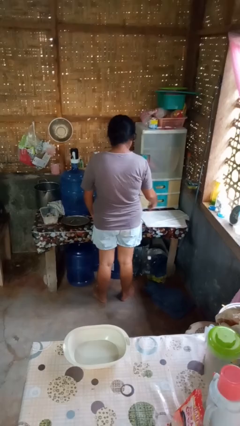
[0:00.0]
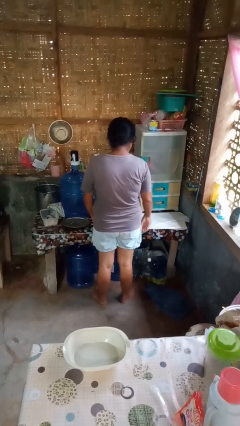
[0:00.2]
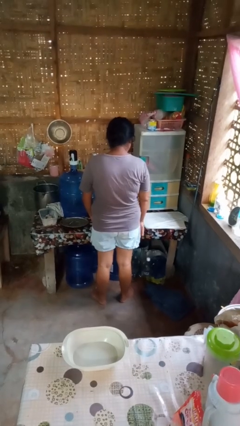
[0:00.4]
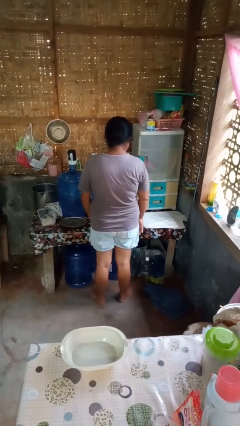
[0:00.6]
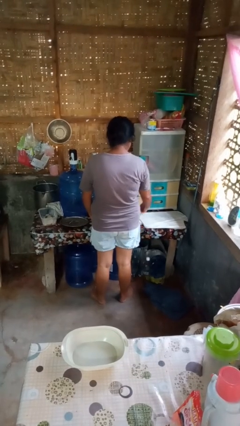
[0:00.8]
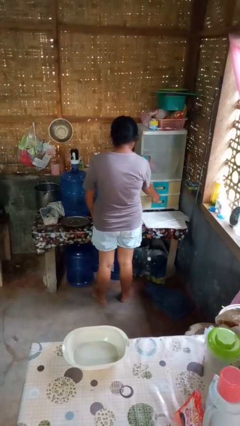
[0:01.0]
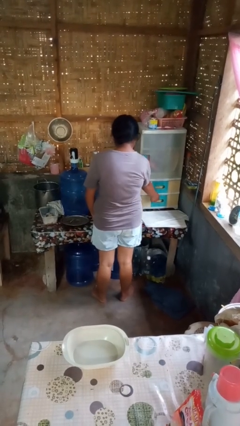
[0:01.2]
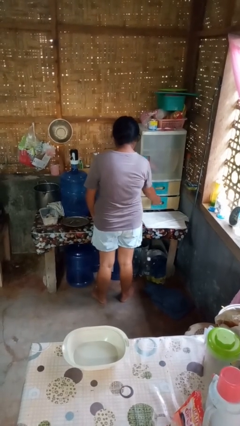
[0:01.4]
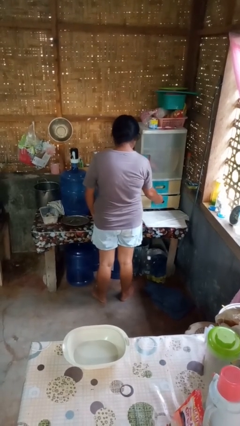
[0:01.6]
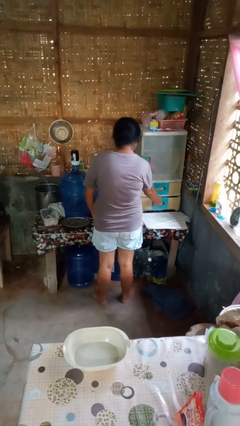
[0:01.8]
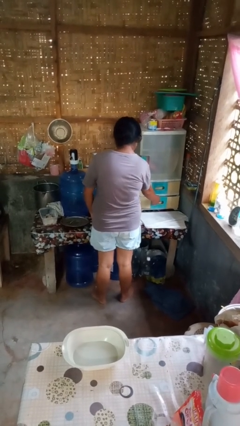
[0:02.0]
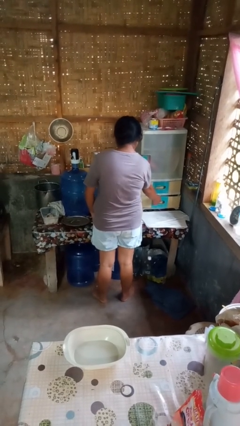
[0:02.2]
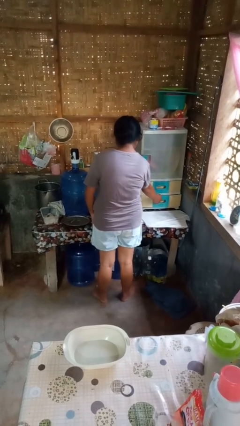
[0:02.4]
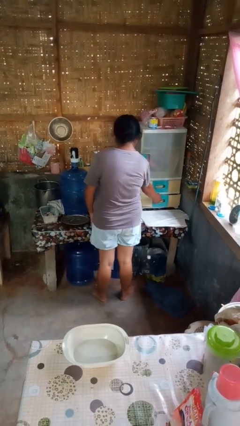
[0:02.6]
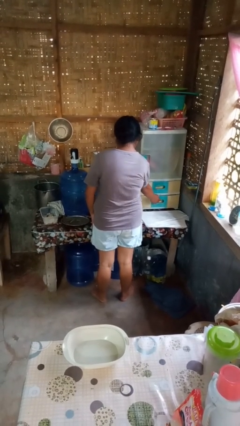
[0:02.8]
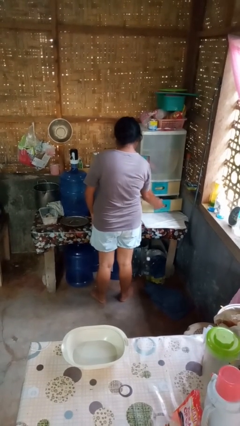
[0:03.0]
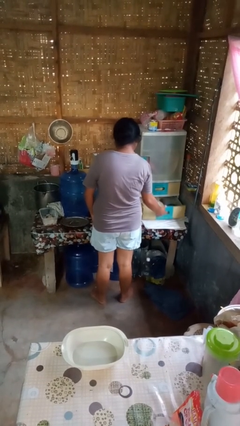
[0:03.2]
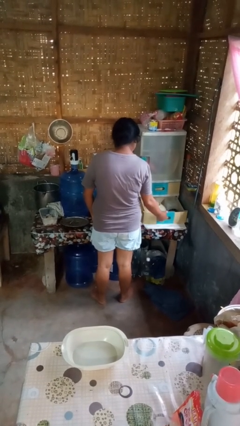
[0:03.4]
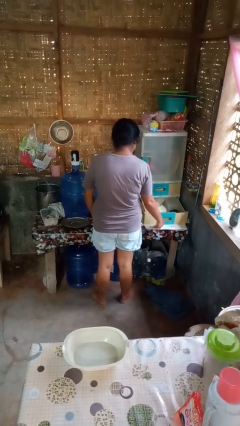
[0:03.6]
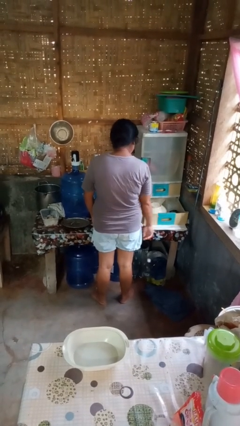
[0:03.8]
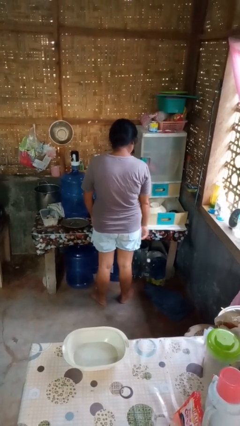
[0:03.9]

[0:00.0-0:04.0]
person opens kitchen drawer

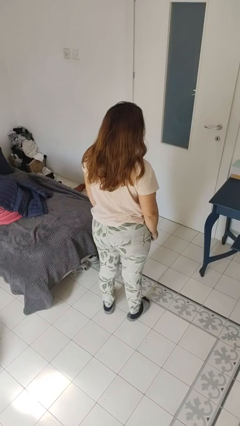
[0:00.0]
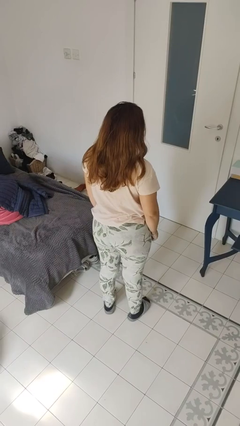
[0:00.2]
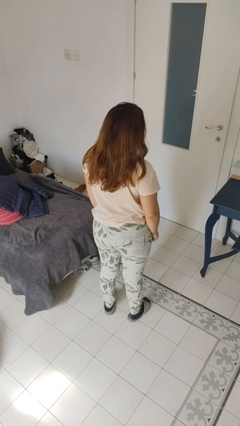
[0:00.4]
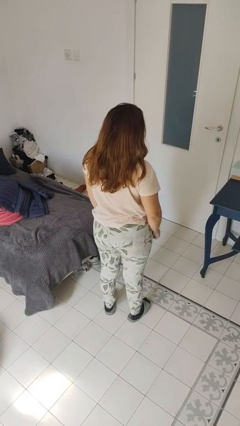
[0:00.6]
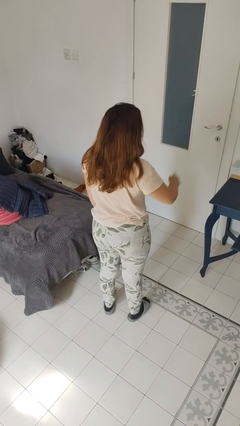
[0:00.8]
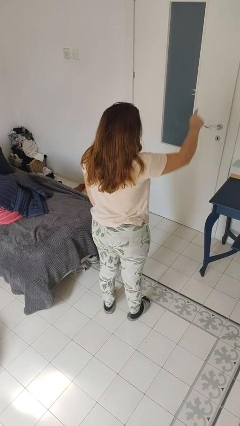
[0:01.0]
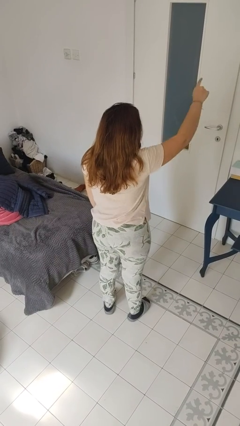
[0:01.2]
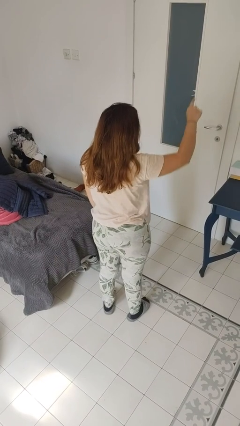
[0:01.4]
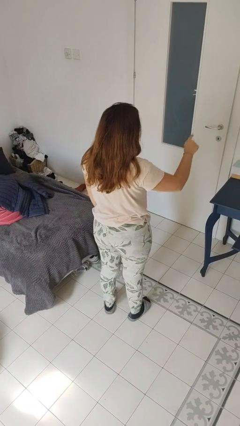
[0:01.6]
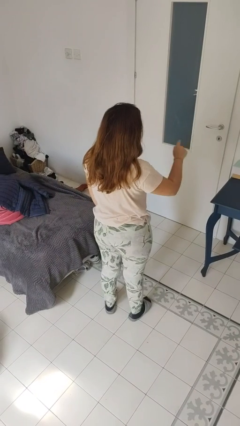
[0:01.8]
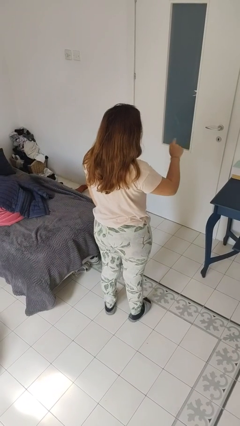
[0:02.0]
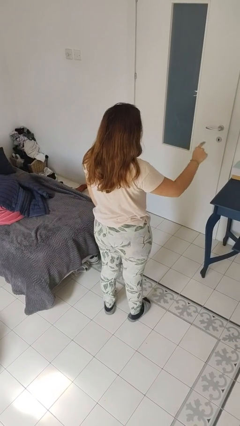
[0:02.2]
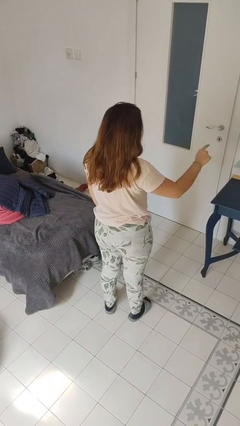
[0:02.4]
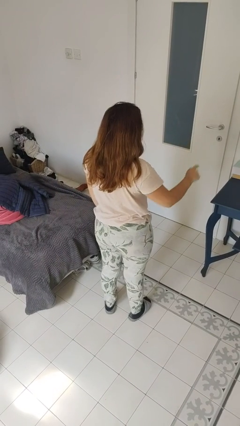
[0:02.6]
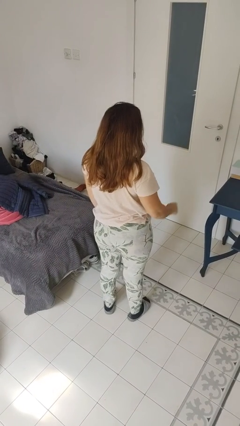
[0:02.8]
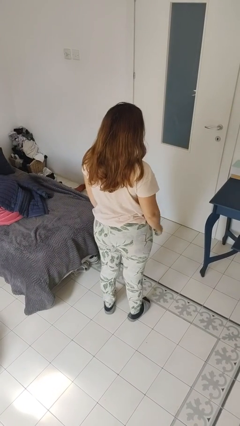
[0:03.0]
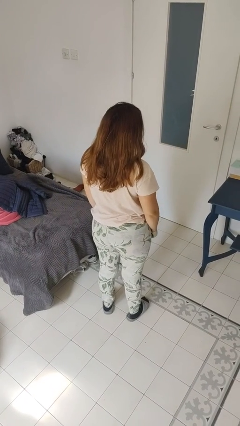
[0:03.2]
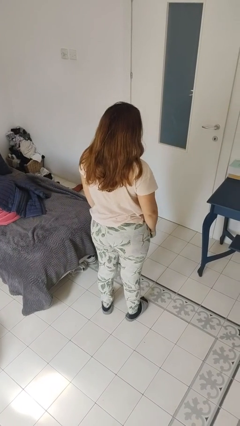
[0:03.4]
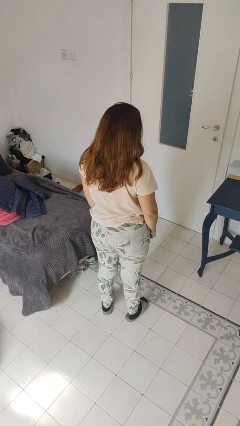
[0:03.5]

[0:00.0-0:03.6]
person gestures number one

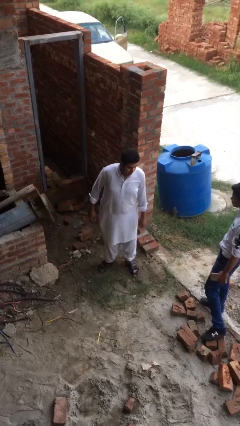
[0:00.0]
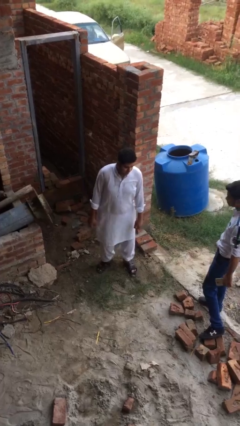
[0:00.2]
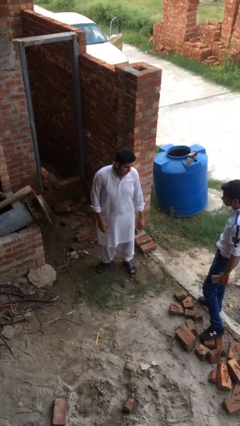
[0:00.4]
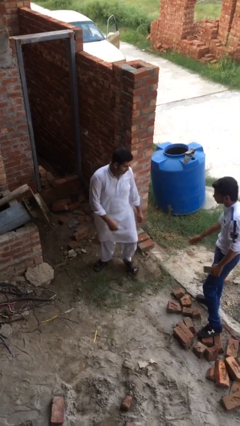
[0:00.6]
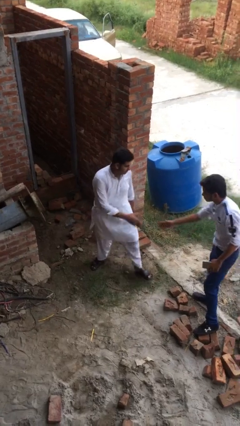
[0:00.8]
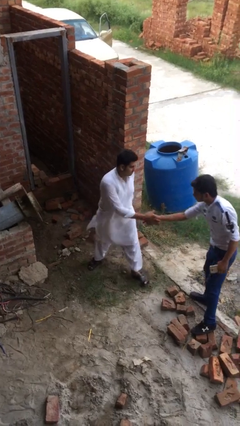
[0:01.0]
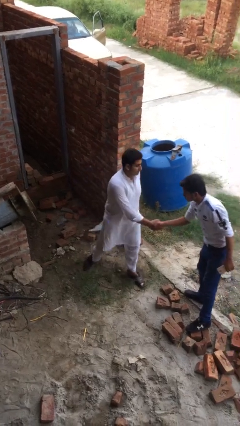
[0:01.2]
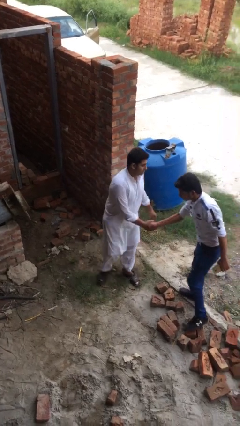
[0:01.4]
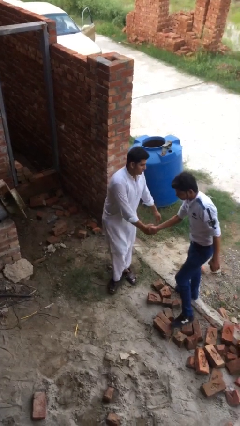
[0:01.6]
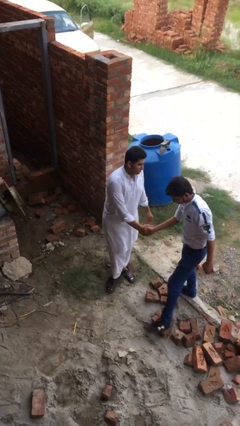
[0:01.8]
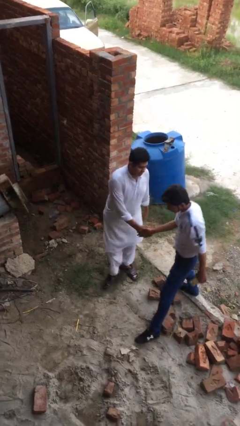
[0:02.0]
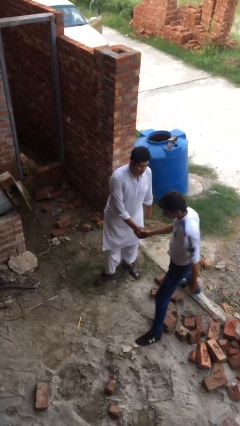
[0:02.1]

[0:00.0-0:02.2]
person shakes hand

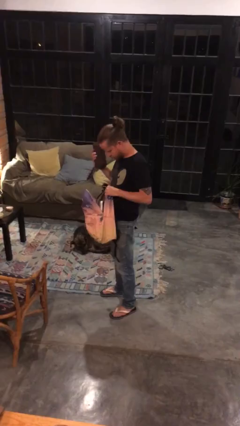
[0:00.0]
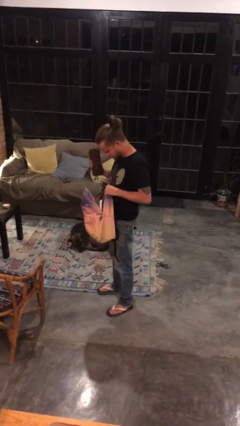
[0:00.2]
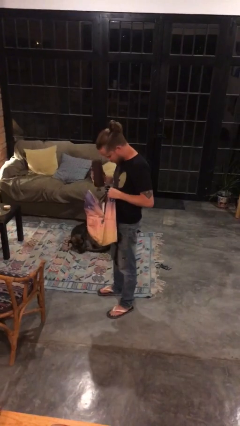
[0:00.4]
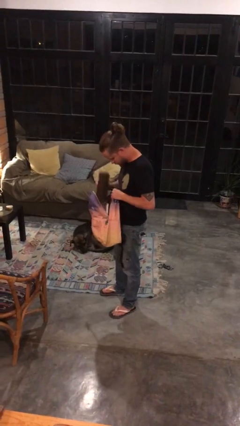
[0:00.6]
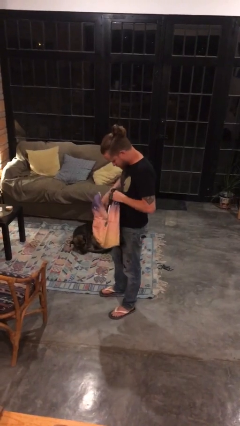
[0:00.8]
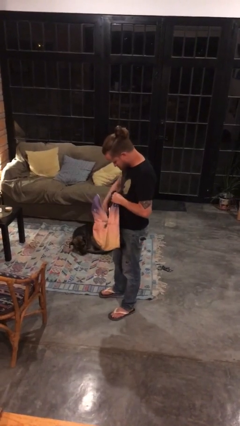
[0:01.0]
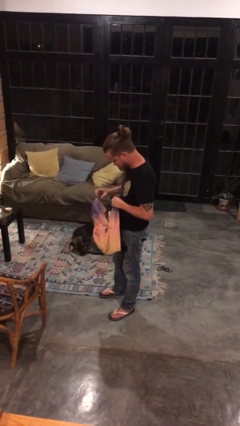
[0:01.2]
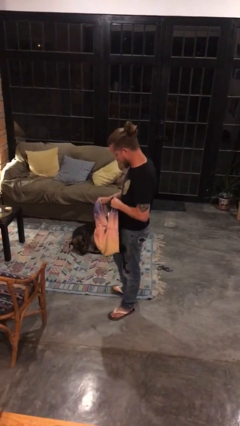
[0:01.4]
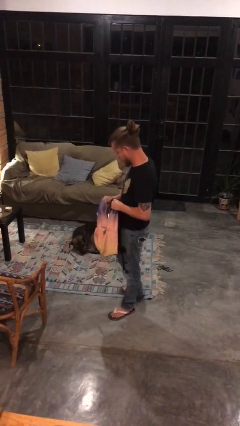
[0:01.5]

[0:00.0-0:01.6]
person puts object into backpack

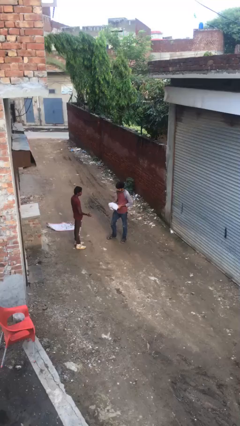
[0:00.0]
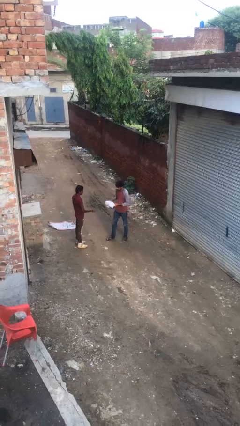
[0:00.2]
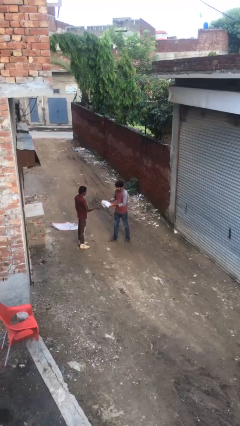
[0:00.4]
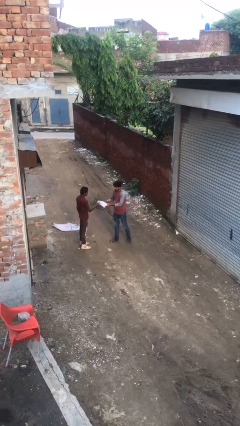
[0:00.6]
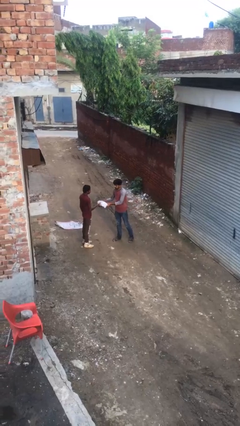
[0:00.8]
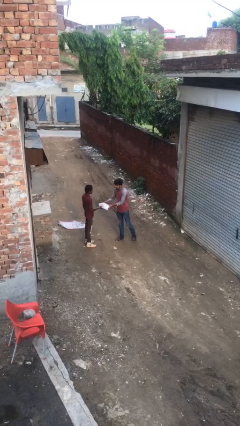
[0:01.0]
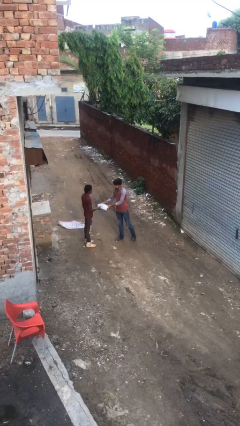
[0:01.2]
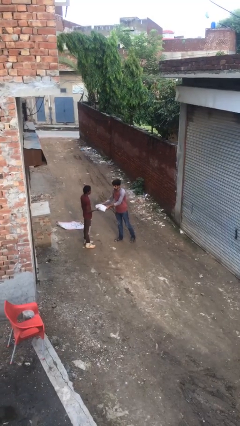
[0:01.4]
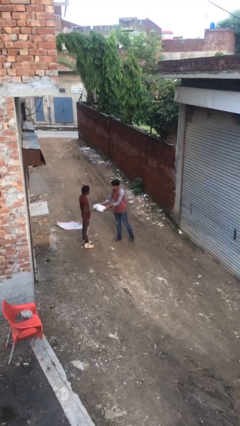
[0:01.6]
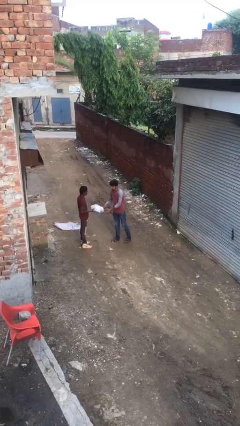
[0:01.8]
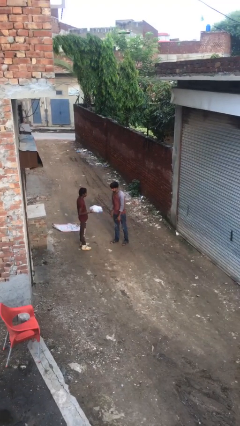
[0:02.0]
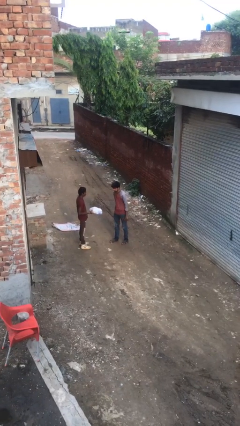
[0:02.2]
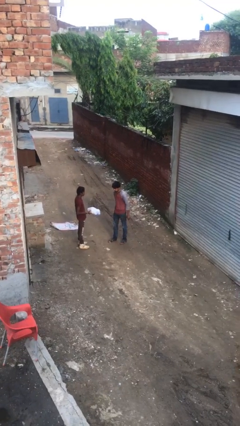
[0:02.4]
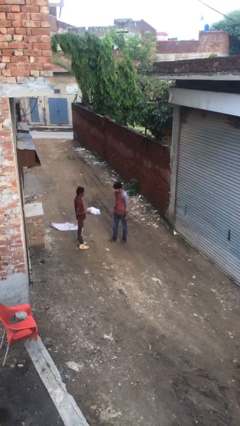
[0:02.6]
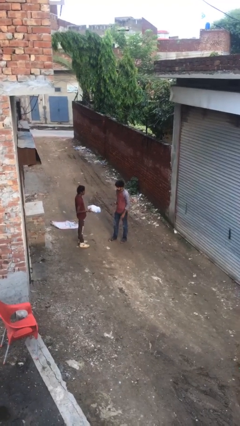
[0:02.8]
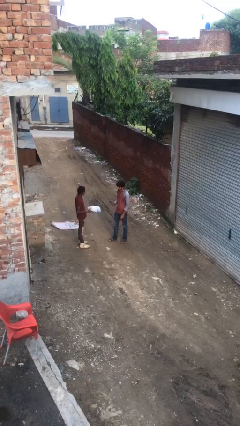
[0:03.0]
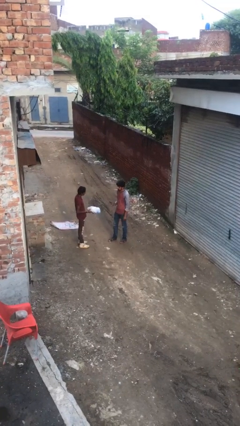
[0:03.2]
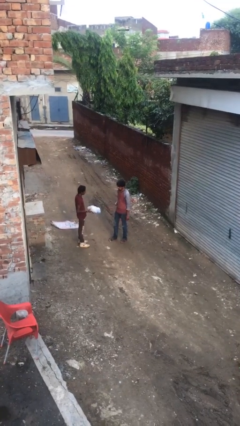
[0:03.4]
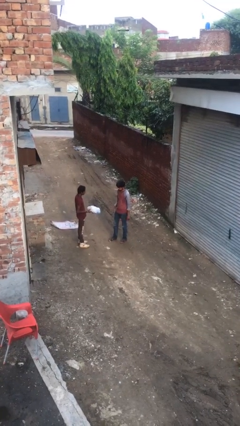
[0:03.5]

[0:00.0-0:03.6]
person transfers object to person

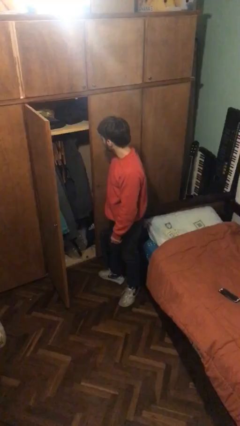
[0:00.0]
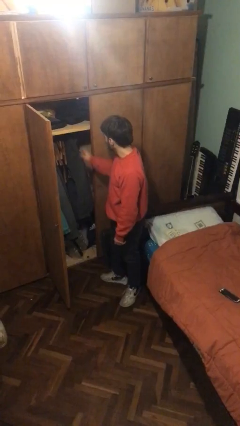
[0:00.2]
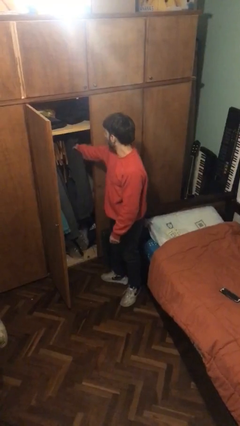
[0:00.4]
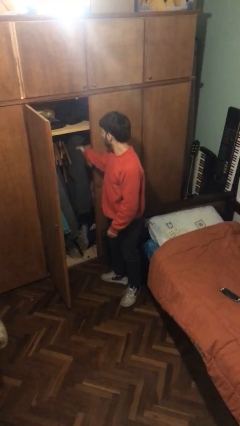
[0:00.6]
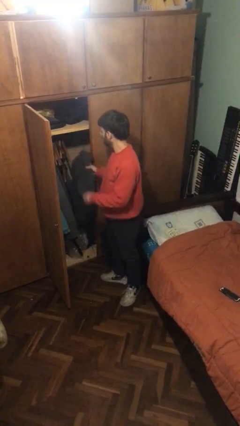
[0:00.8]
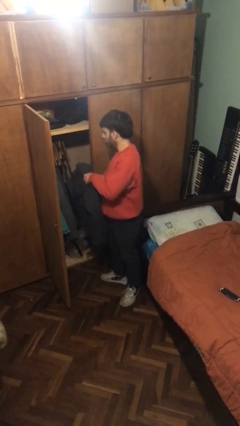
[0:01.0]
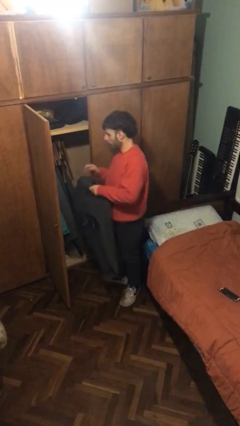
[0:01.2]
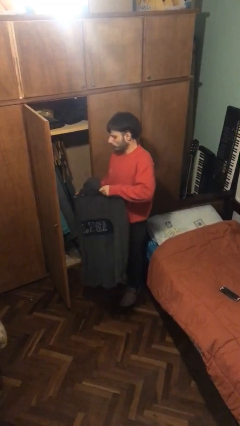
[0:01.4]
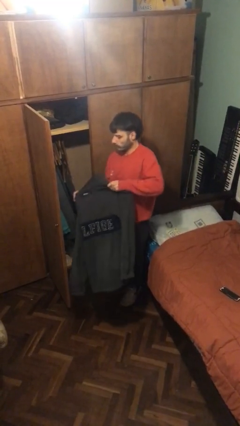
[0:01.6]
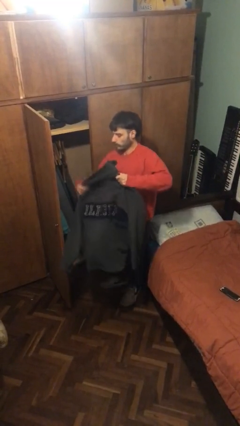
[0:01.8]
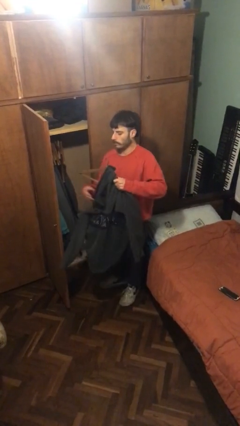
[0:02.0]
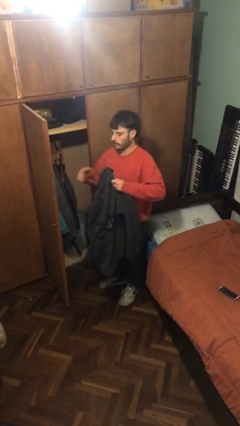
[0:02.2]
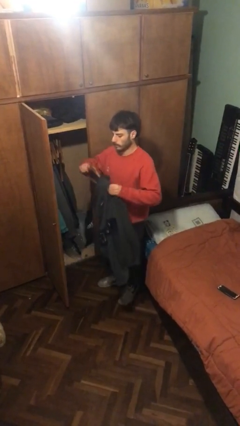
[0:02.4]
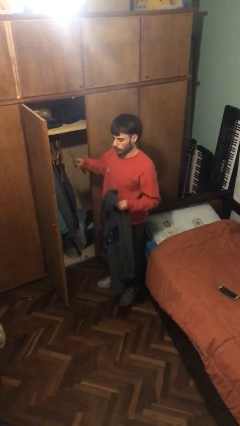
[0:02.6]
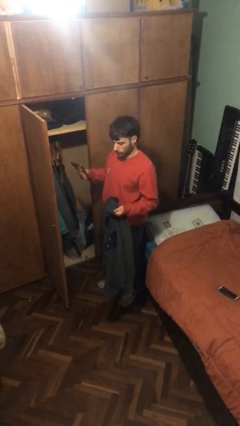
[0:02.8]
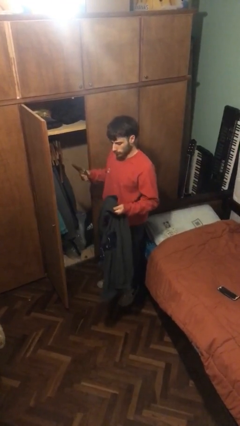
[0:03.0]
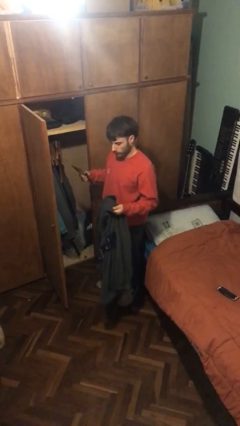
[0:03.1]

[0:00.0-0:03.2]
person takes clothes from closet
